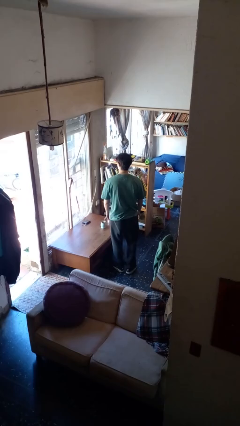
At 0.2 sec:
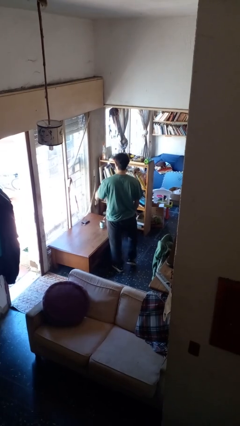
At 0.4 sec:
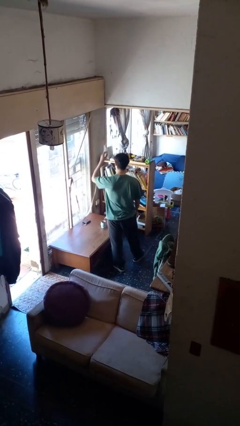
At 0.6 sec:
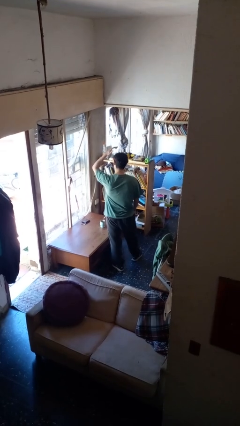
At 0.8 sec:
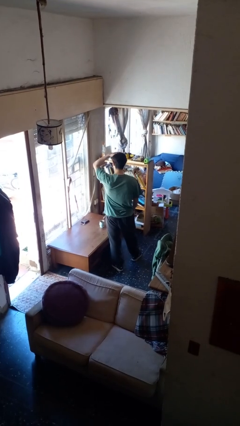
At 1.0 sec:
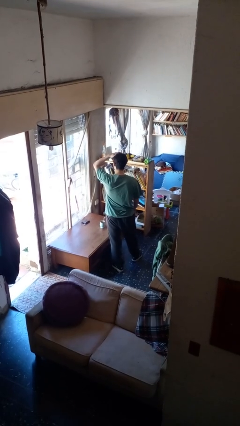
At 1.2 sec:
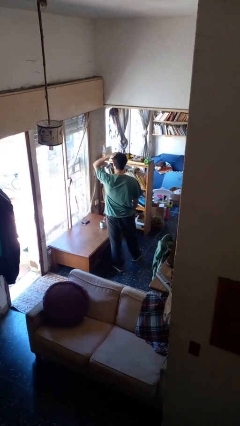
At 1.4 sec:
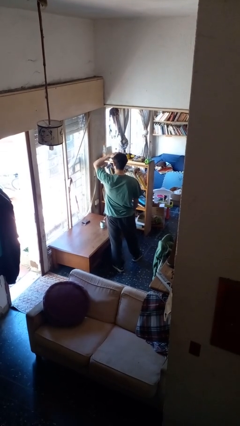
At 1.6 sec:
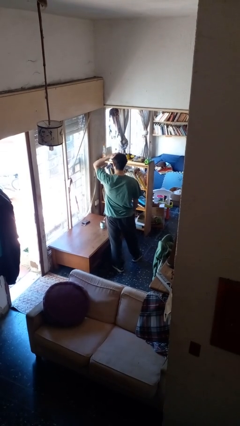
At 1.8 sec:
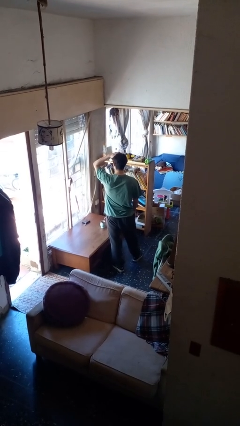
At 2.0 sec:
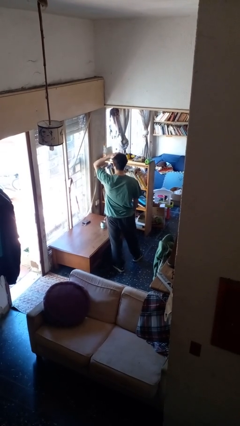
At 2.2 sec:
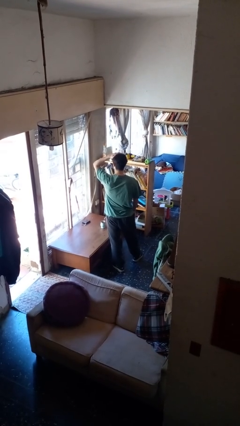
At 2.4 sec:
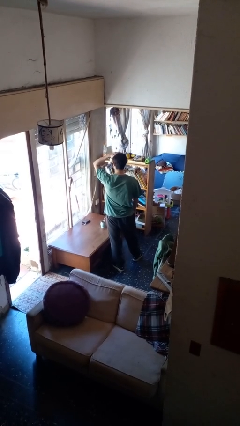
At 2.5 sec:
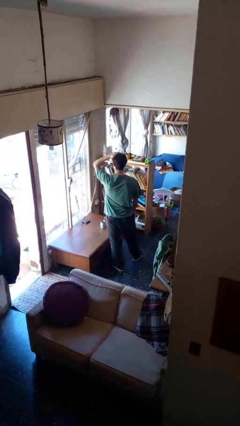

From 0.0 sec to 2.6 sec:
person pats head

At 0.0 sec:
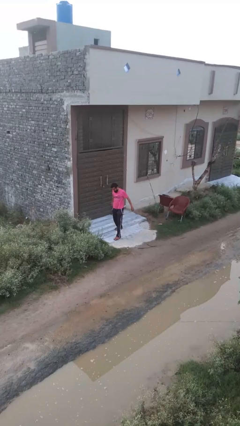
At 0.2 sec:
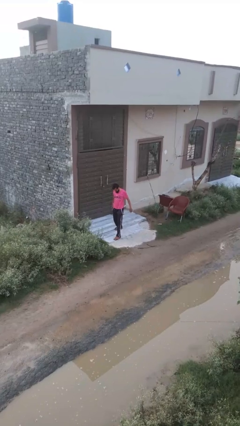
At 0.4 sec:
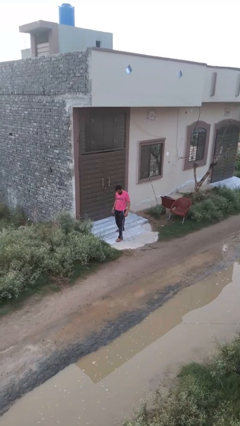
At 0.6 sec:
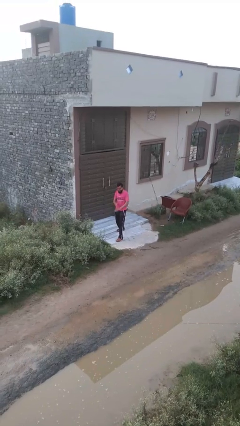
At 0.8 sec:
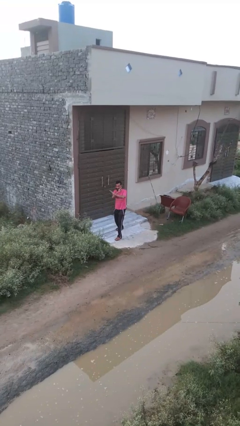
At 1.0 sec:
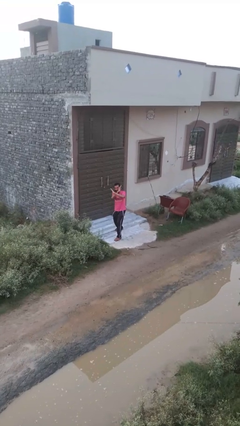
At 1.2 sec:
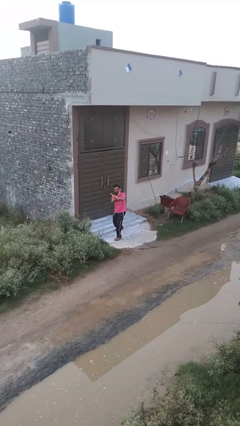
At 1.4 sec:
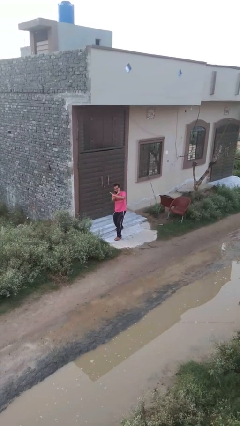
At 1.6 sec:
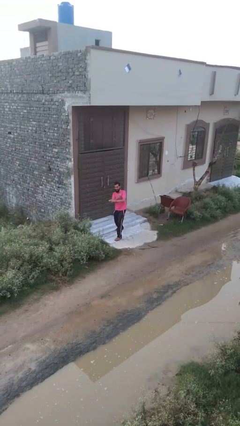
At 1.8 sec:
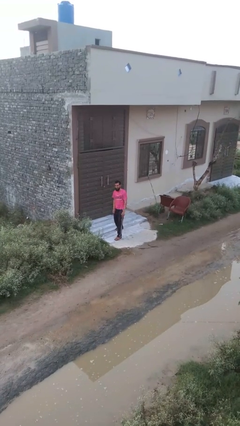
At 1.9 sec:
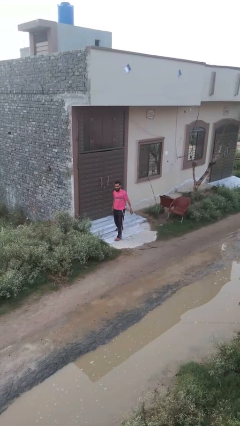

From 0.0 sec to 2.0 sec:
person crosses arms

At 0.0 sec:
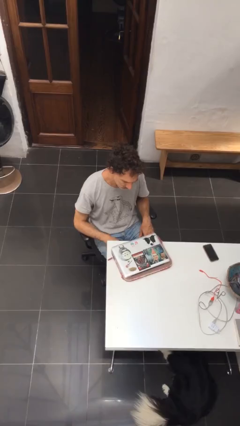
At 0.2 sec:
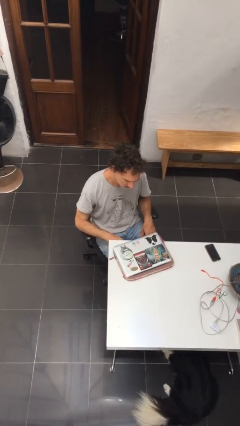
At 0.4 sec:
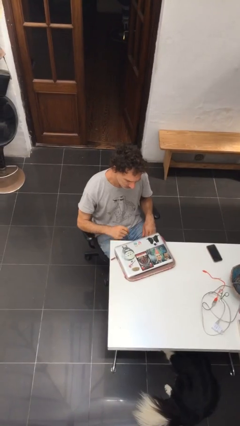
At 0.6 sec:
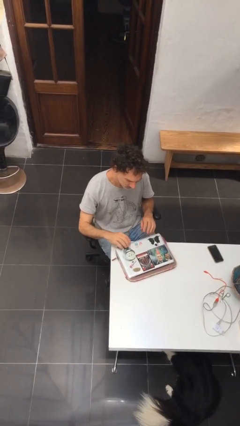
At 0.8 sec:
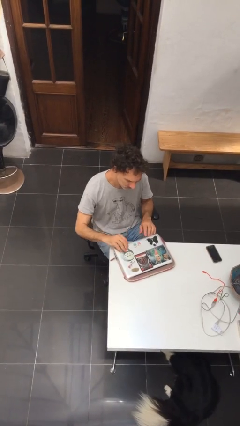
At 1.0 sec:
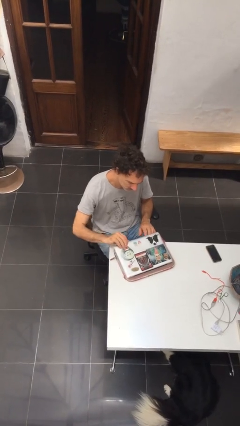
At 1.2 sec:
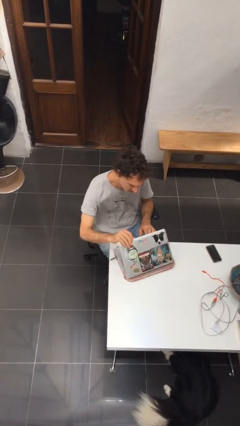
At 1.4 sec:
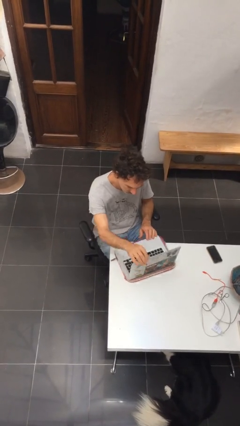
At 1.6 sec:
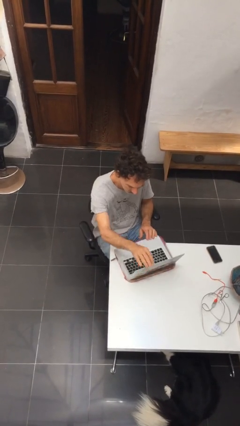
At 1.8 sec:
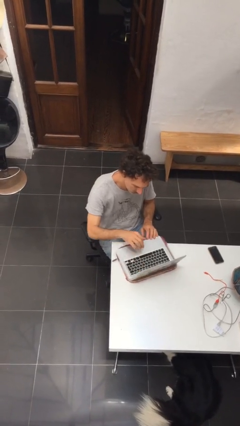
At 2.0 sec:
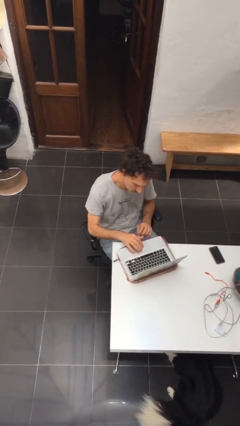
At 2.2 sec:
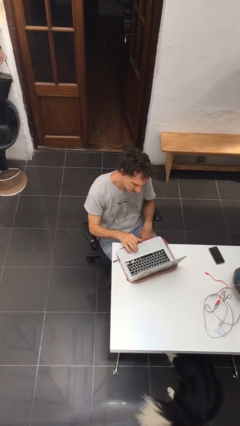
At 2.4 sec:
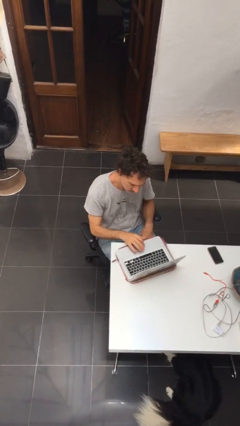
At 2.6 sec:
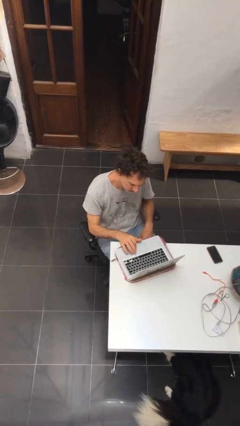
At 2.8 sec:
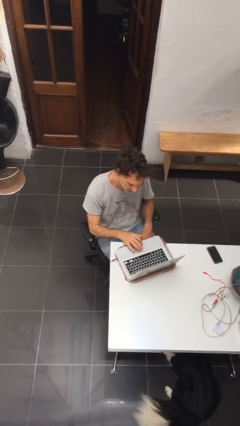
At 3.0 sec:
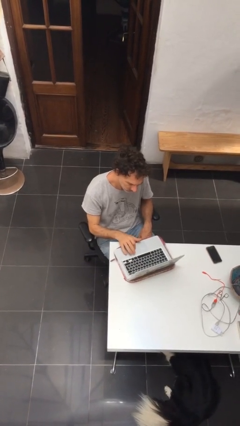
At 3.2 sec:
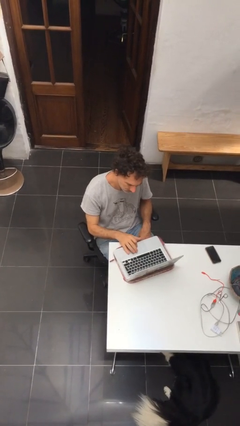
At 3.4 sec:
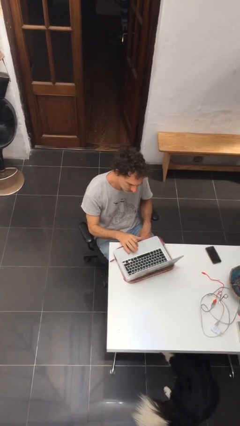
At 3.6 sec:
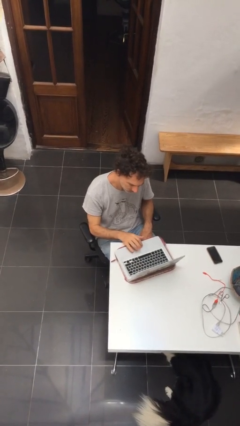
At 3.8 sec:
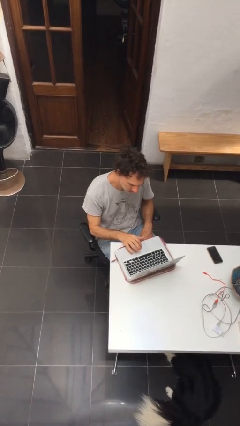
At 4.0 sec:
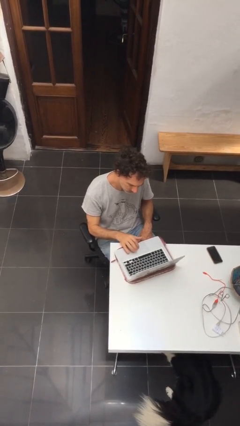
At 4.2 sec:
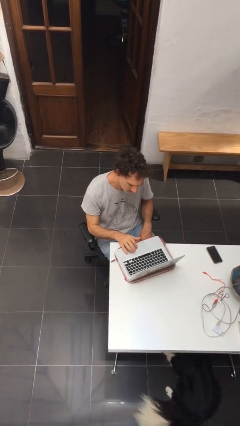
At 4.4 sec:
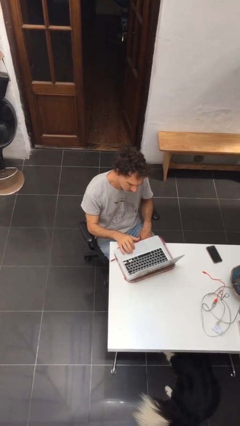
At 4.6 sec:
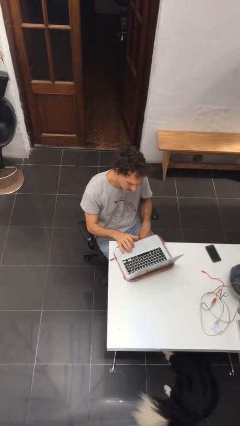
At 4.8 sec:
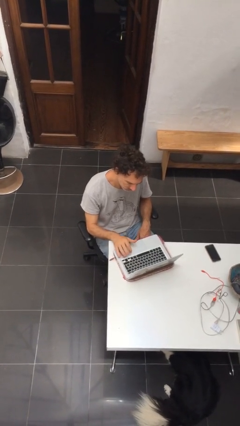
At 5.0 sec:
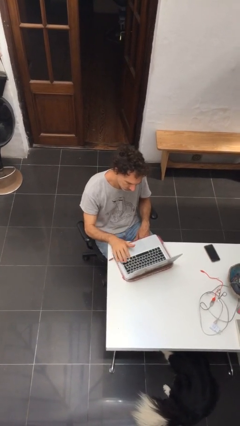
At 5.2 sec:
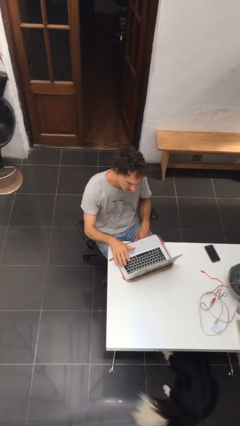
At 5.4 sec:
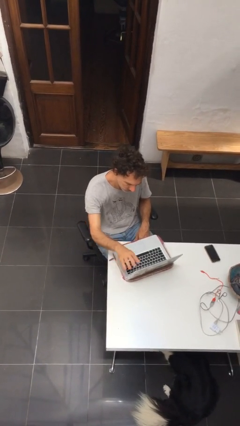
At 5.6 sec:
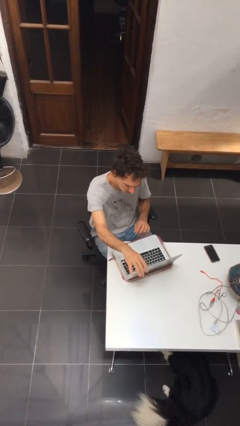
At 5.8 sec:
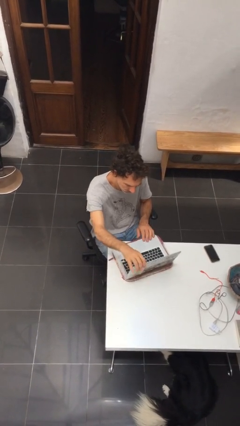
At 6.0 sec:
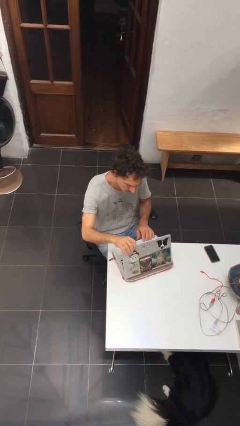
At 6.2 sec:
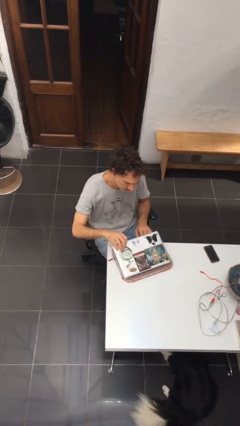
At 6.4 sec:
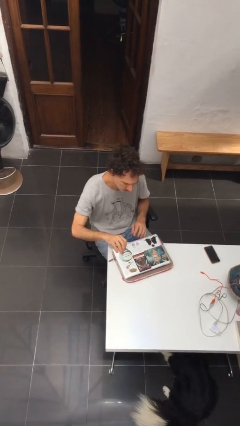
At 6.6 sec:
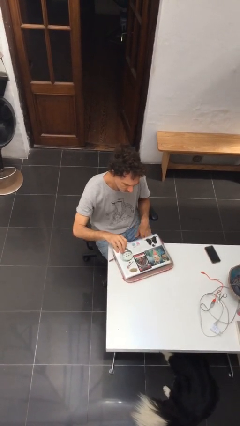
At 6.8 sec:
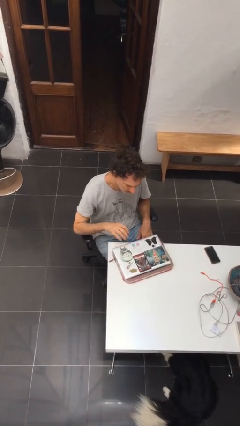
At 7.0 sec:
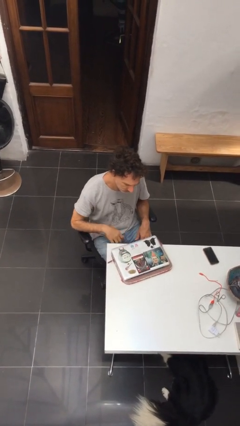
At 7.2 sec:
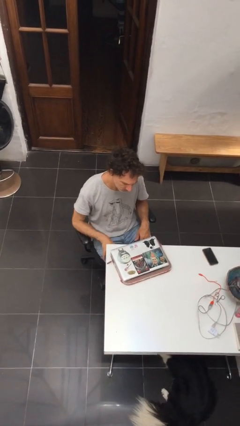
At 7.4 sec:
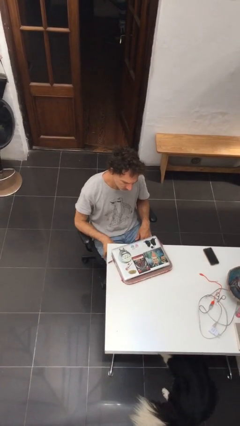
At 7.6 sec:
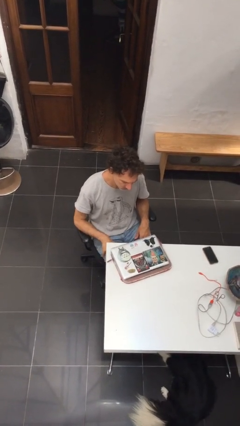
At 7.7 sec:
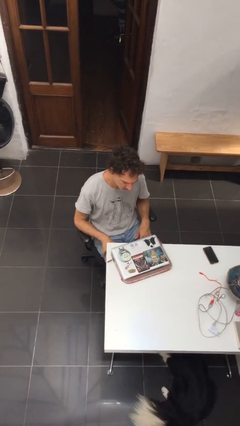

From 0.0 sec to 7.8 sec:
person interacts with laptop

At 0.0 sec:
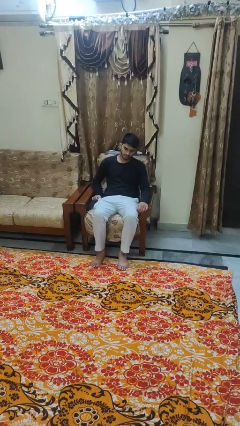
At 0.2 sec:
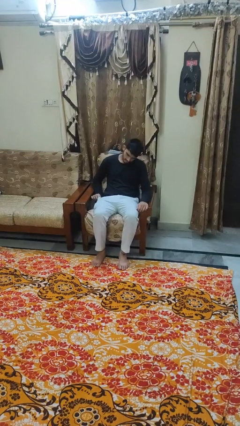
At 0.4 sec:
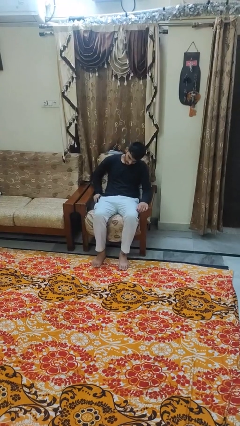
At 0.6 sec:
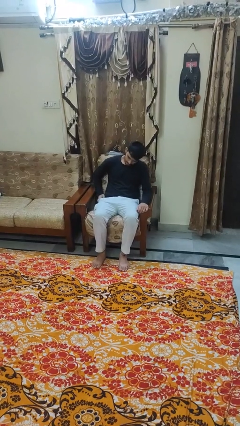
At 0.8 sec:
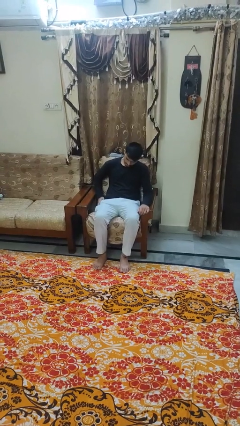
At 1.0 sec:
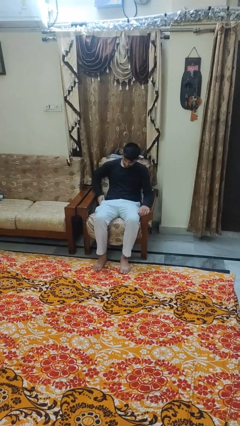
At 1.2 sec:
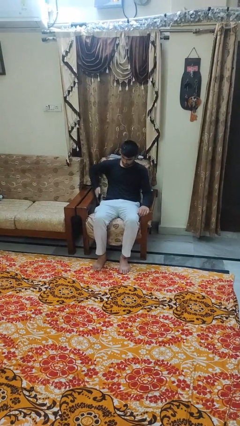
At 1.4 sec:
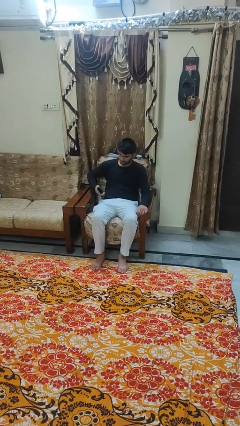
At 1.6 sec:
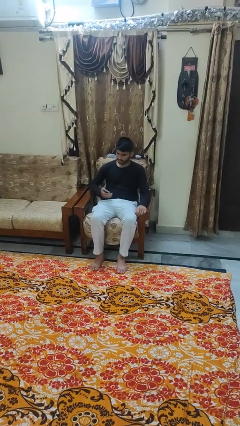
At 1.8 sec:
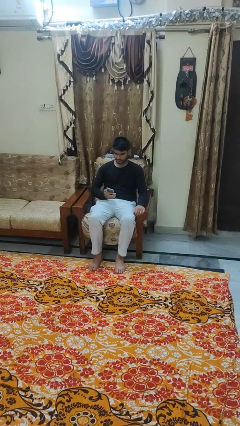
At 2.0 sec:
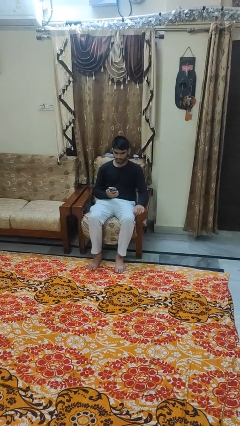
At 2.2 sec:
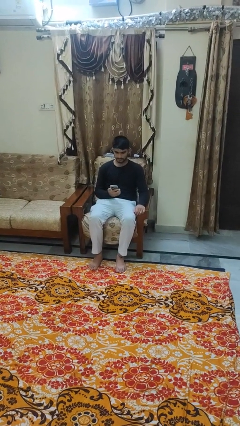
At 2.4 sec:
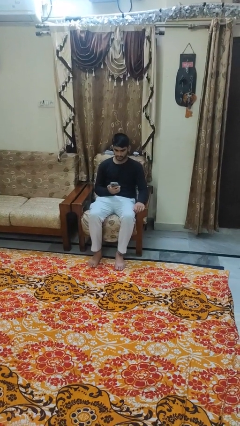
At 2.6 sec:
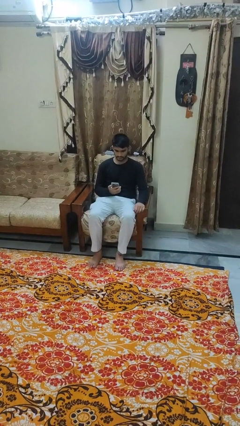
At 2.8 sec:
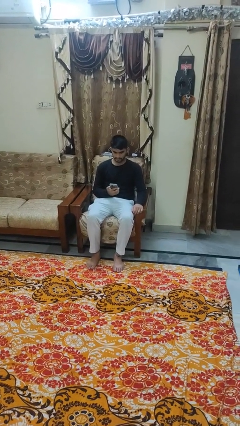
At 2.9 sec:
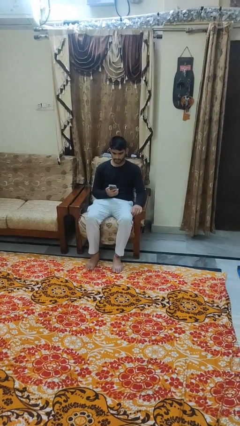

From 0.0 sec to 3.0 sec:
person takes phone from pocket

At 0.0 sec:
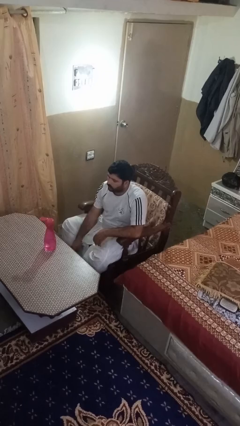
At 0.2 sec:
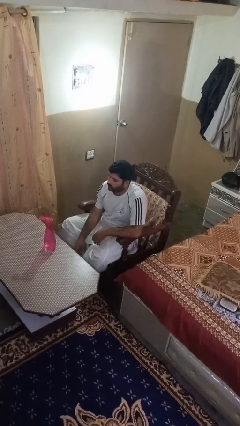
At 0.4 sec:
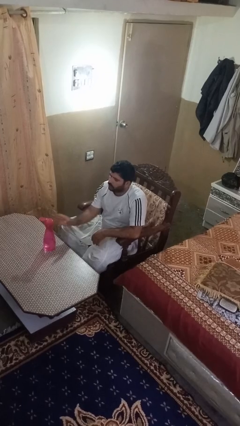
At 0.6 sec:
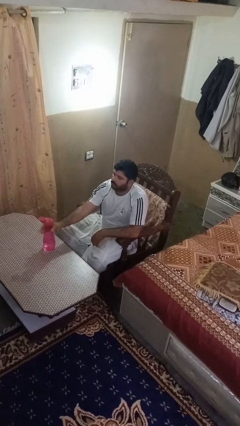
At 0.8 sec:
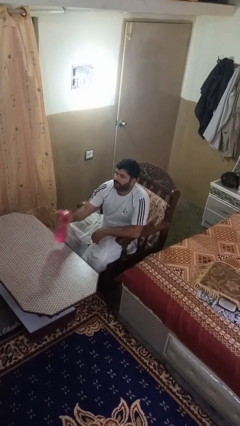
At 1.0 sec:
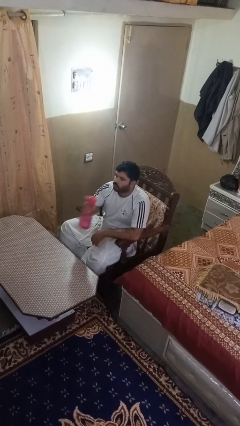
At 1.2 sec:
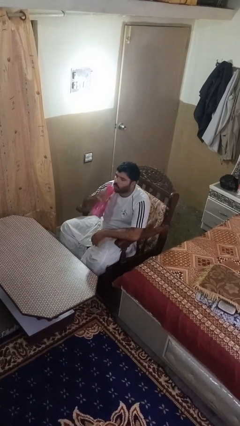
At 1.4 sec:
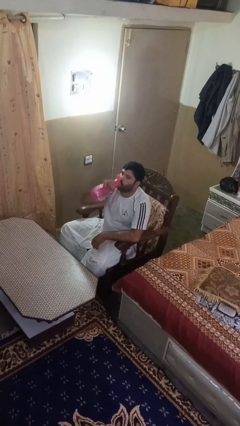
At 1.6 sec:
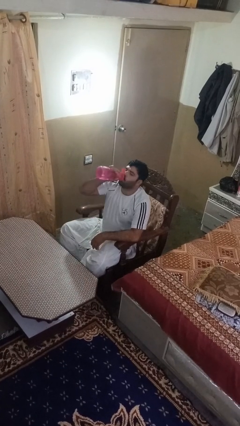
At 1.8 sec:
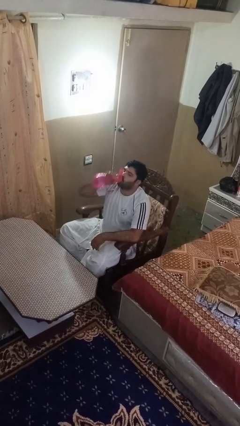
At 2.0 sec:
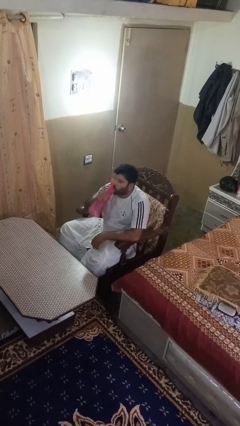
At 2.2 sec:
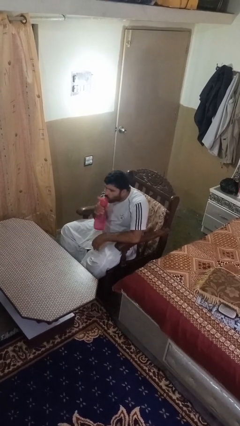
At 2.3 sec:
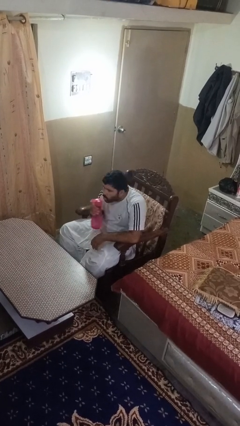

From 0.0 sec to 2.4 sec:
person drinks from bottle
